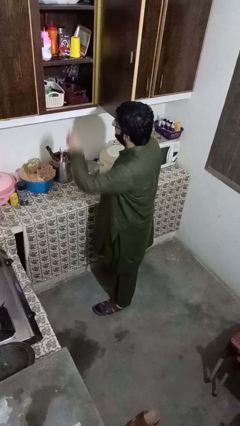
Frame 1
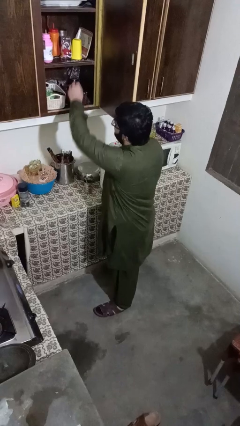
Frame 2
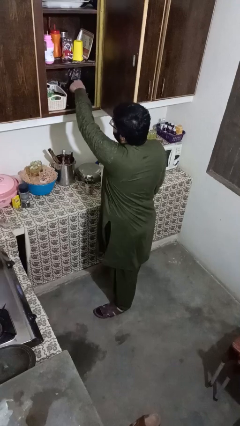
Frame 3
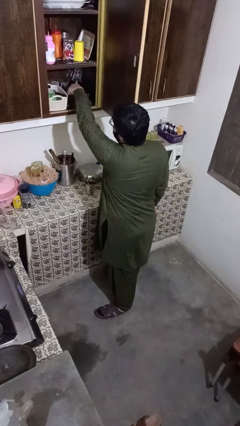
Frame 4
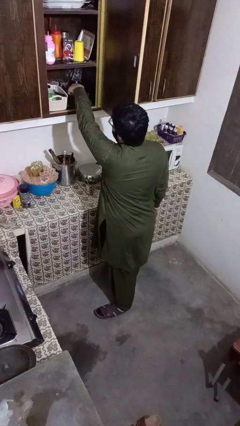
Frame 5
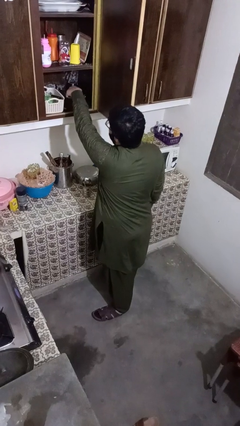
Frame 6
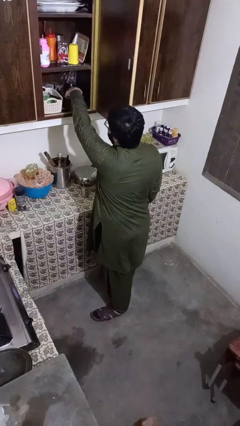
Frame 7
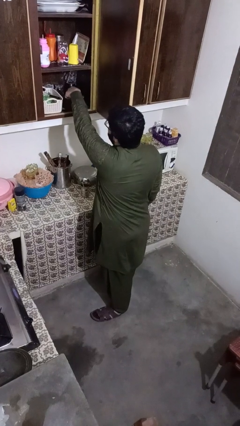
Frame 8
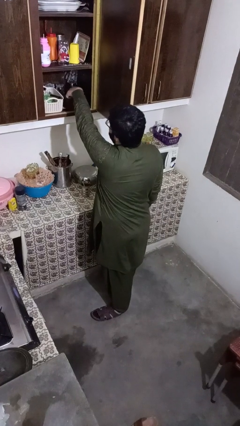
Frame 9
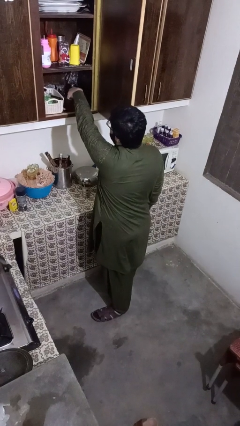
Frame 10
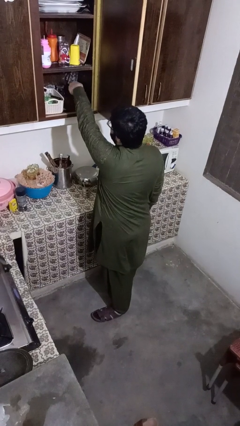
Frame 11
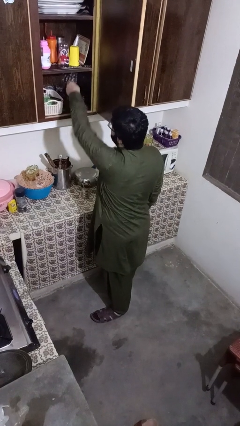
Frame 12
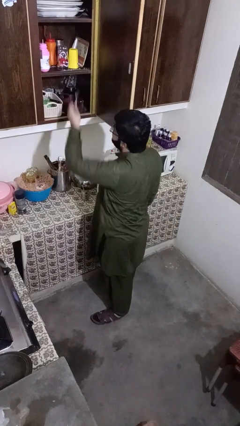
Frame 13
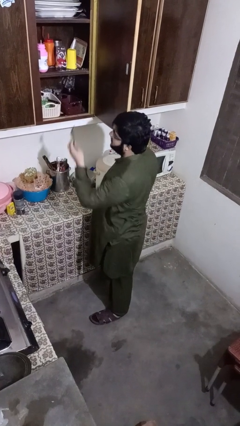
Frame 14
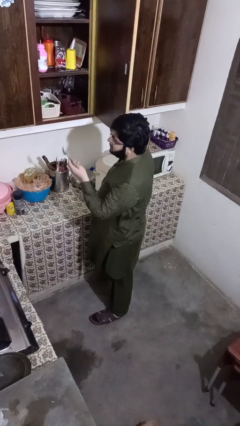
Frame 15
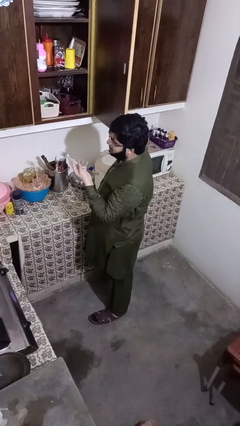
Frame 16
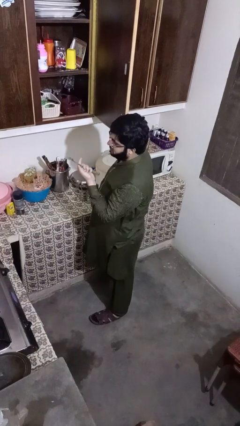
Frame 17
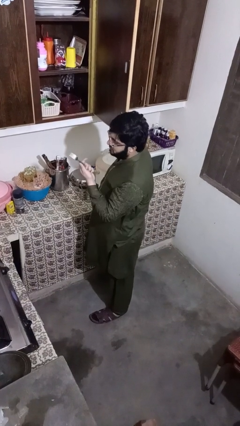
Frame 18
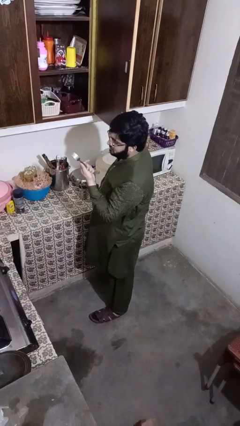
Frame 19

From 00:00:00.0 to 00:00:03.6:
person takes object from kitchen drawer

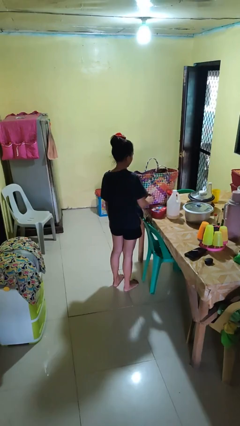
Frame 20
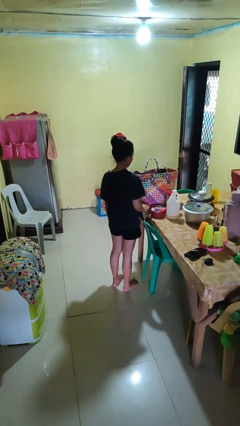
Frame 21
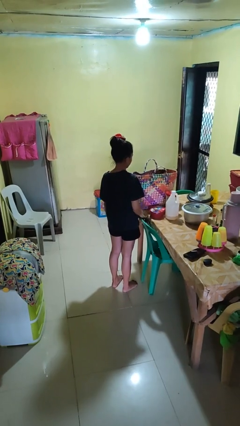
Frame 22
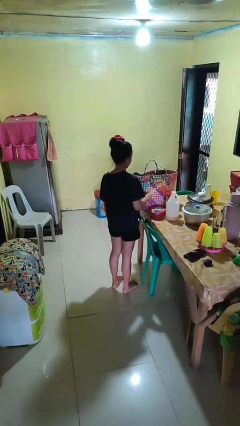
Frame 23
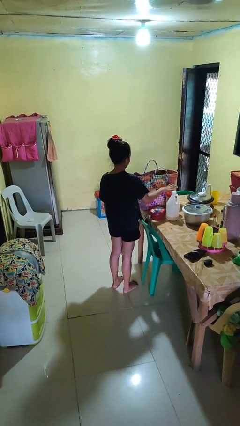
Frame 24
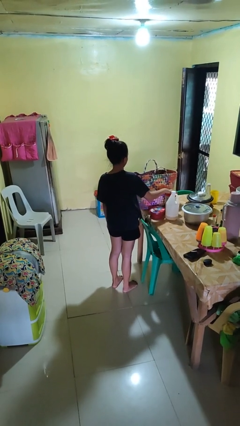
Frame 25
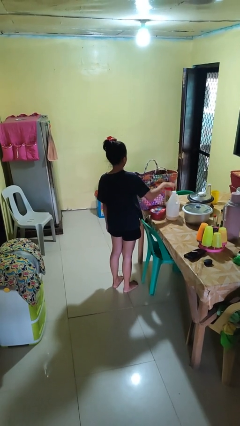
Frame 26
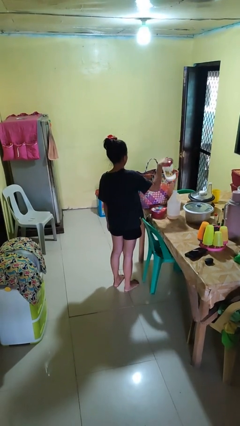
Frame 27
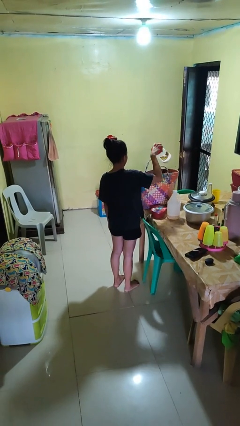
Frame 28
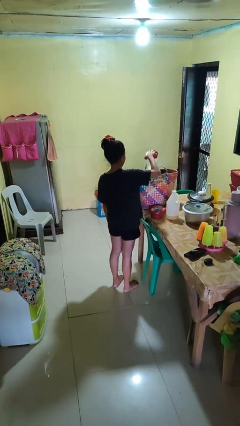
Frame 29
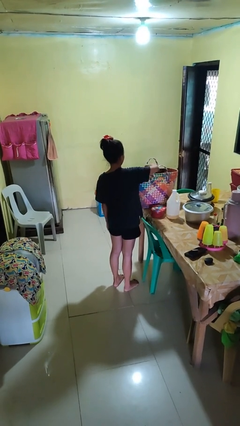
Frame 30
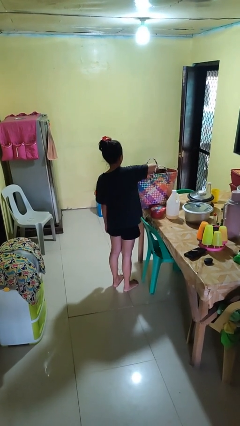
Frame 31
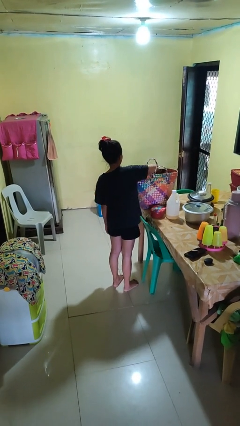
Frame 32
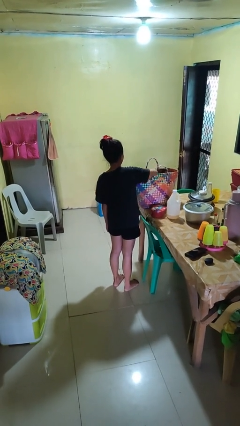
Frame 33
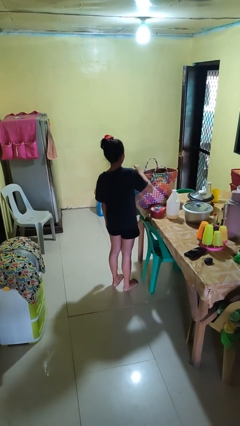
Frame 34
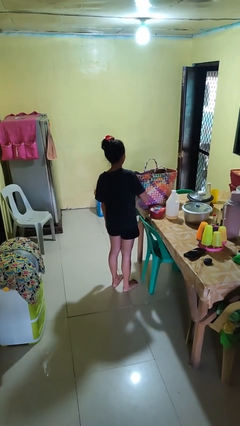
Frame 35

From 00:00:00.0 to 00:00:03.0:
person puts object into basket

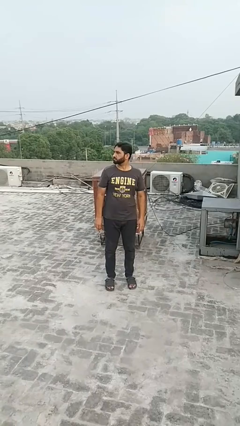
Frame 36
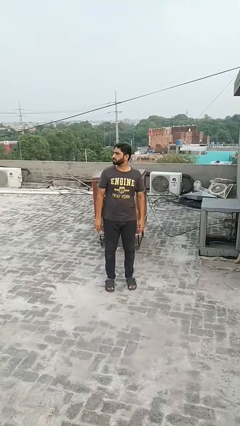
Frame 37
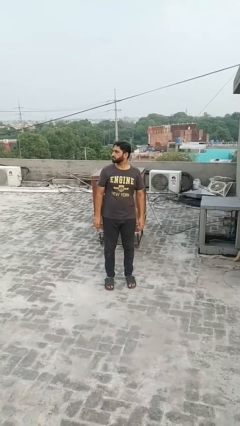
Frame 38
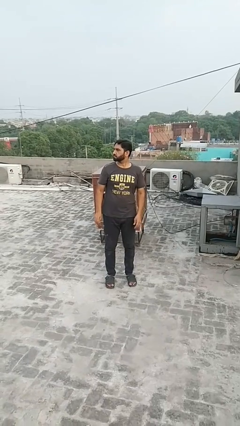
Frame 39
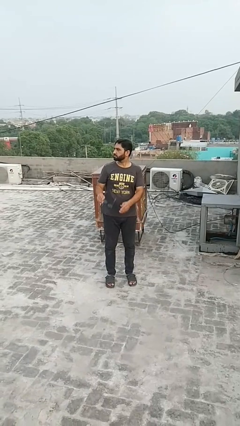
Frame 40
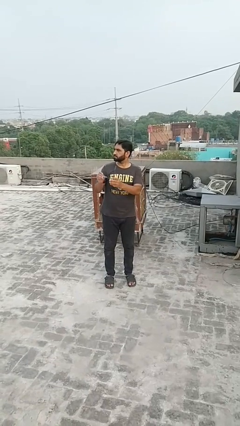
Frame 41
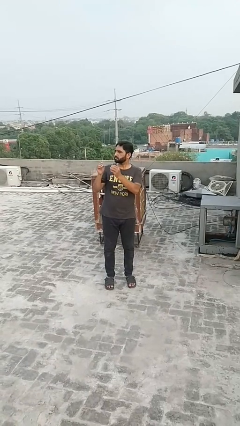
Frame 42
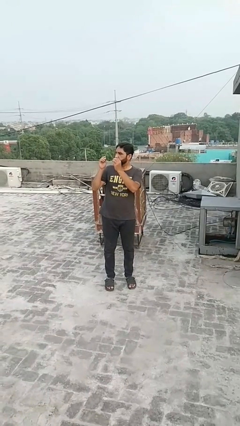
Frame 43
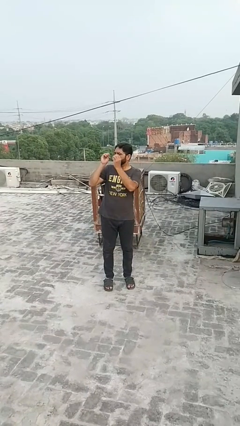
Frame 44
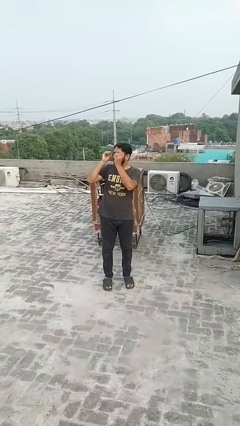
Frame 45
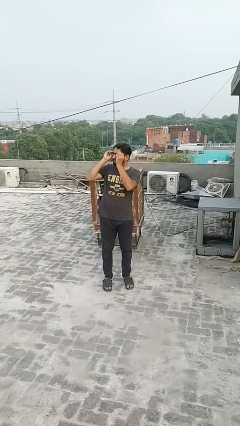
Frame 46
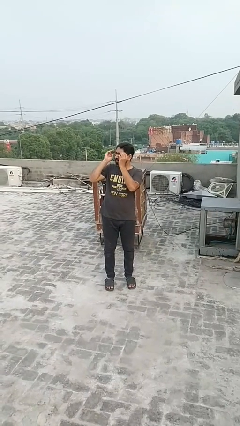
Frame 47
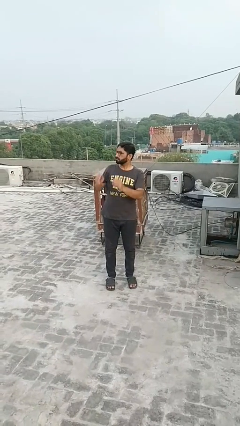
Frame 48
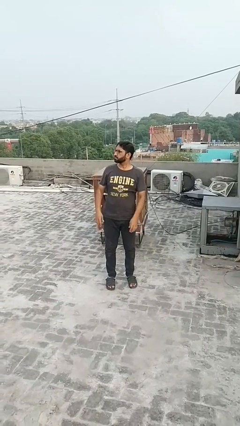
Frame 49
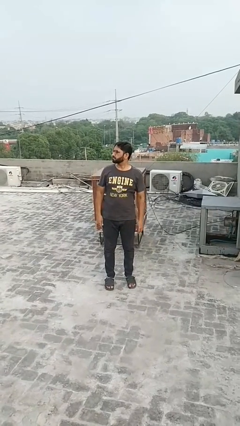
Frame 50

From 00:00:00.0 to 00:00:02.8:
person puts on glasses

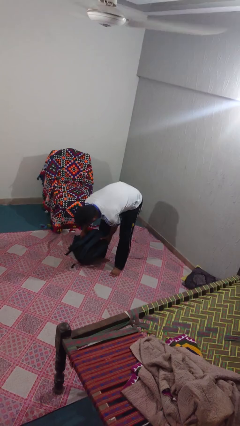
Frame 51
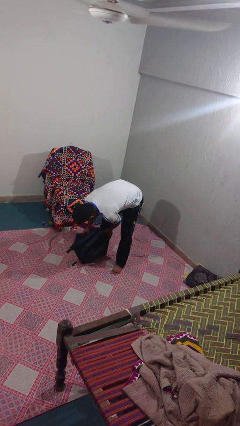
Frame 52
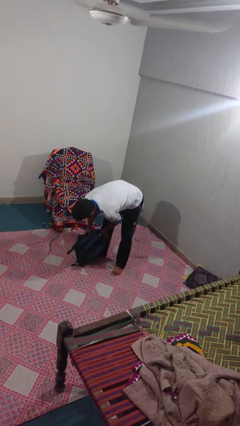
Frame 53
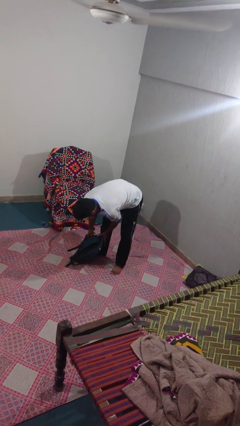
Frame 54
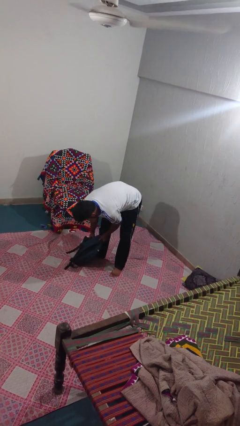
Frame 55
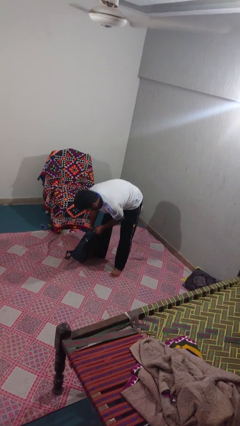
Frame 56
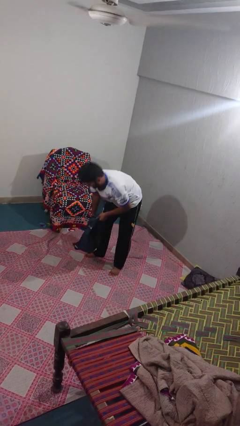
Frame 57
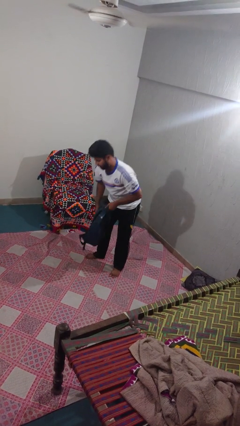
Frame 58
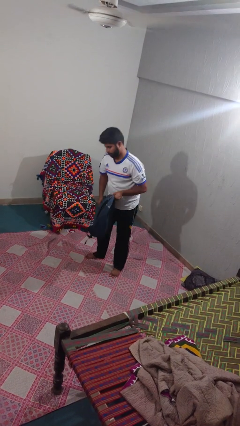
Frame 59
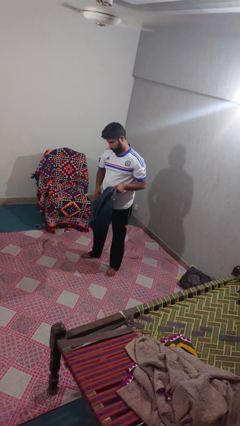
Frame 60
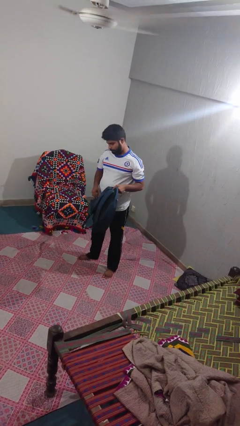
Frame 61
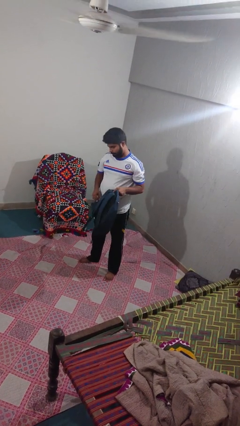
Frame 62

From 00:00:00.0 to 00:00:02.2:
person picks up object from floor

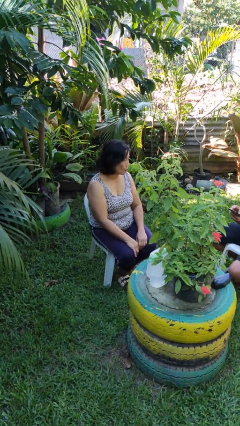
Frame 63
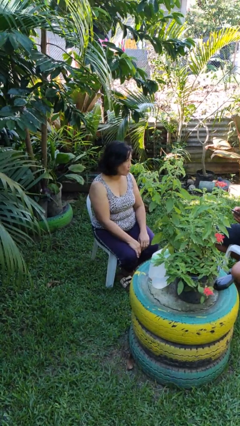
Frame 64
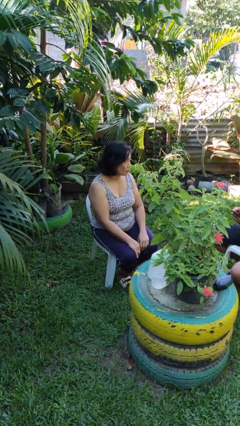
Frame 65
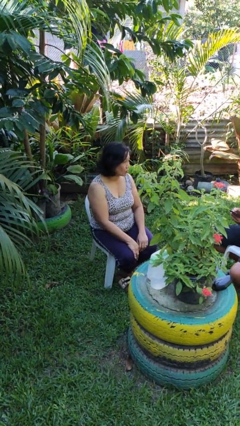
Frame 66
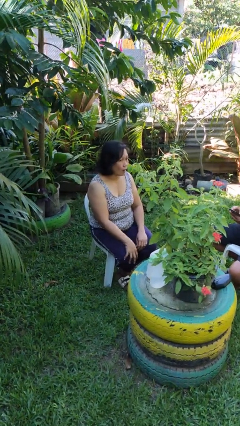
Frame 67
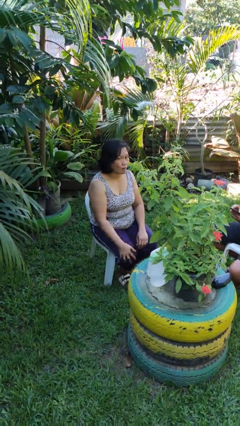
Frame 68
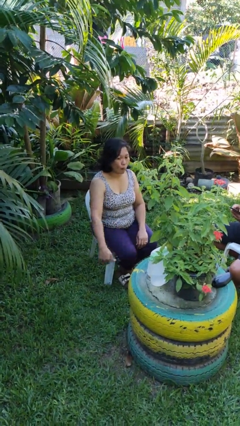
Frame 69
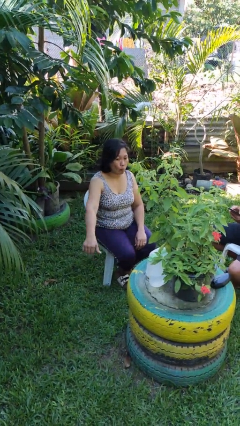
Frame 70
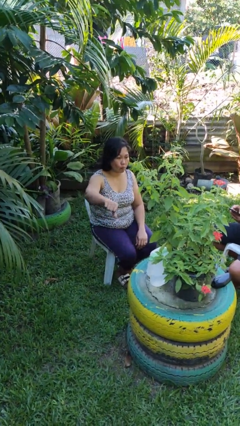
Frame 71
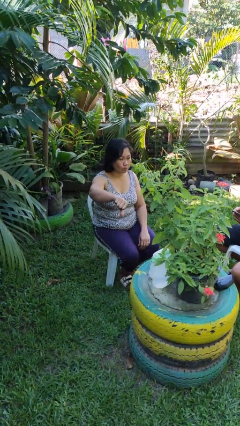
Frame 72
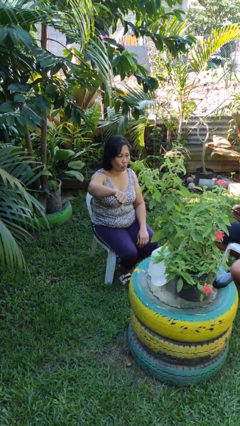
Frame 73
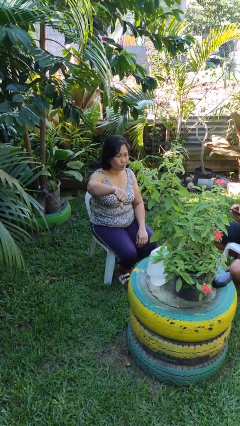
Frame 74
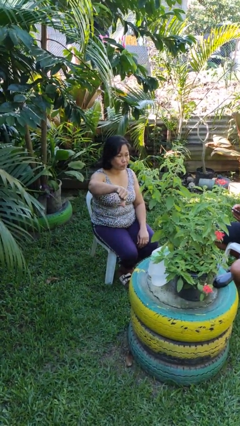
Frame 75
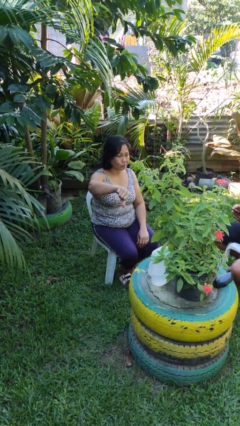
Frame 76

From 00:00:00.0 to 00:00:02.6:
person gestures thumbs down

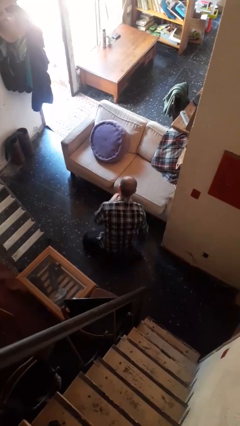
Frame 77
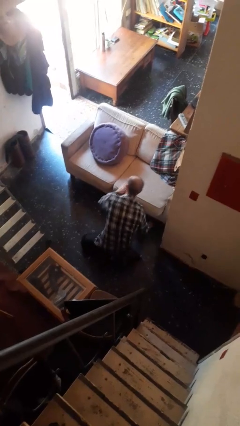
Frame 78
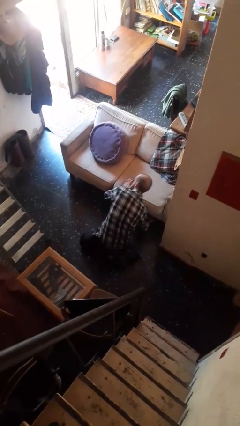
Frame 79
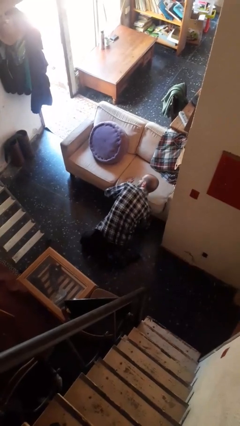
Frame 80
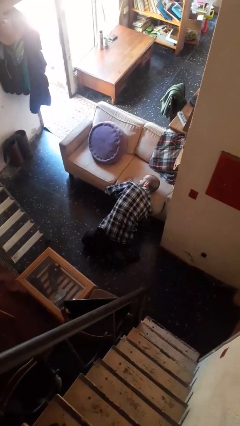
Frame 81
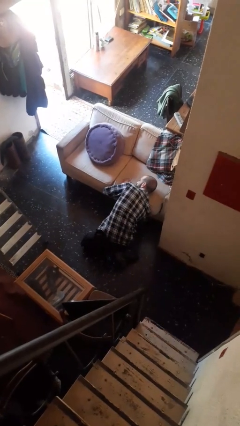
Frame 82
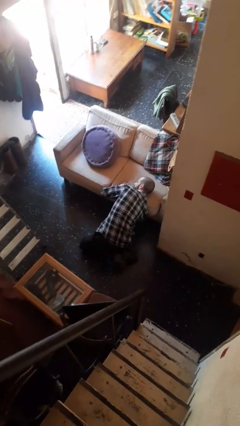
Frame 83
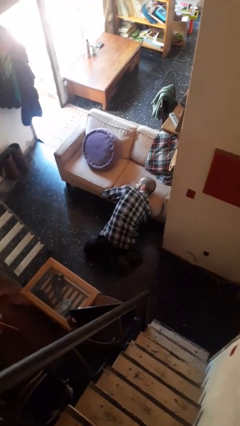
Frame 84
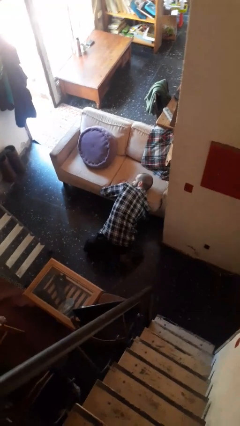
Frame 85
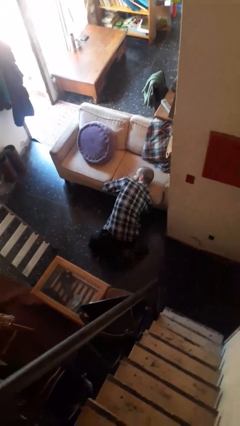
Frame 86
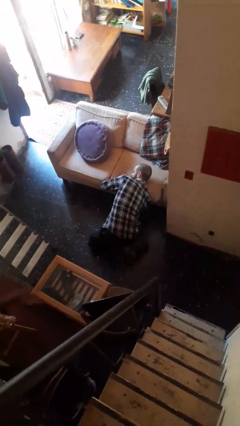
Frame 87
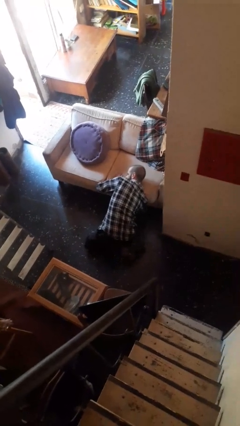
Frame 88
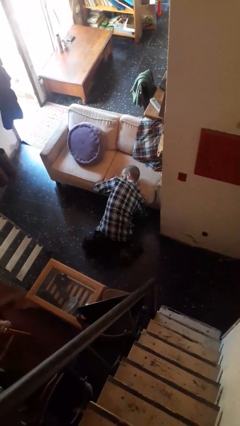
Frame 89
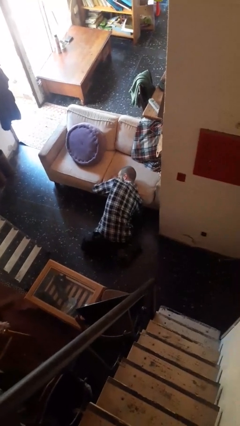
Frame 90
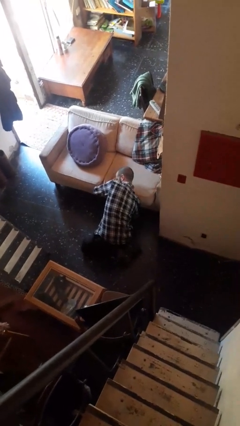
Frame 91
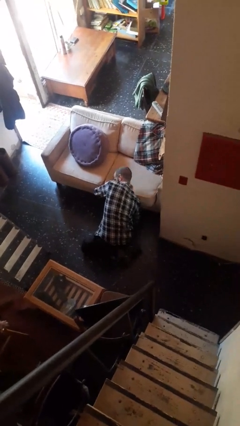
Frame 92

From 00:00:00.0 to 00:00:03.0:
person searches under couch

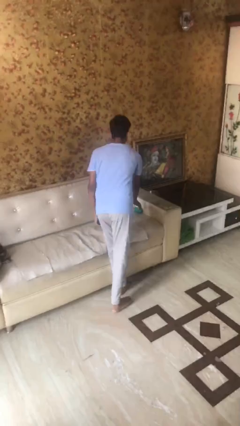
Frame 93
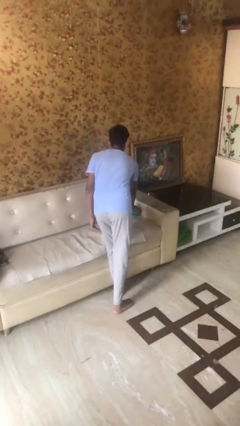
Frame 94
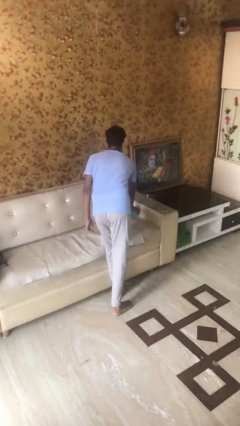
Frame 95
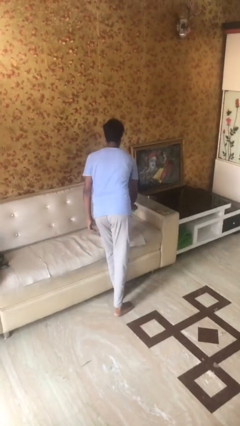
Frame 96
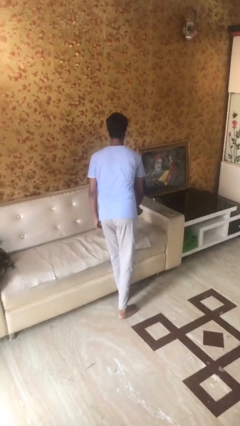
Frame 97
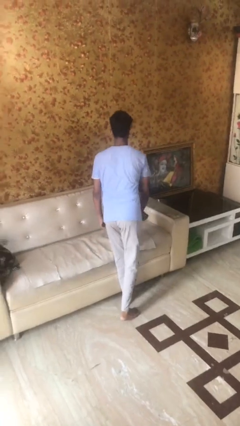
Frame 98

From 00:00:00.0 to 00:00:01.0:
person picks up object from bed
